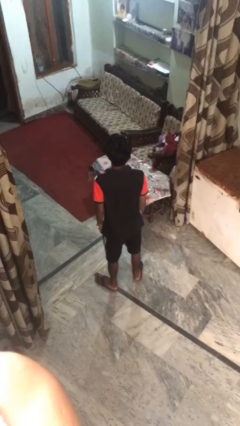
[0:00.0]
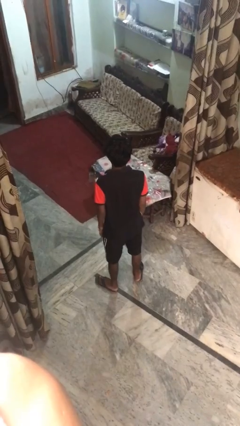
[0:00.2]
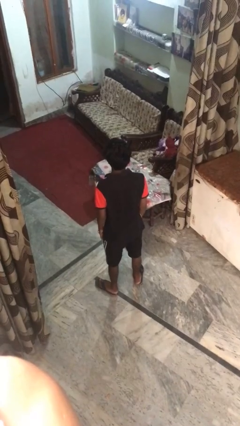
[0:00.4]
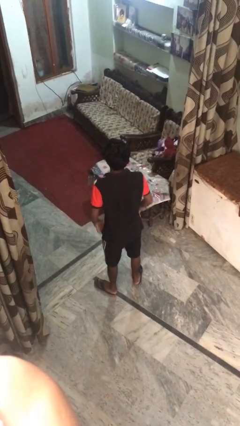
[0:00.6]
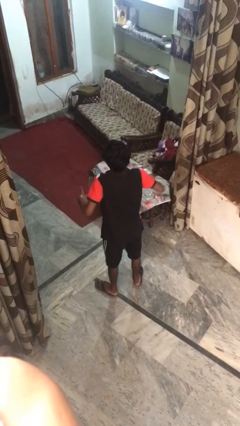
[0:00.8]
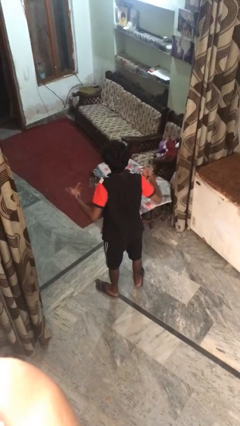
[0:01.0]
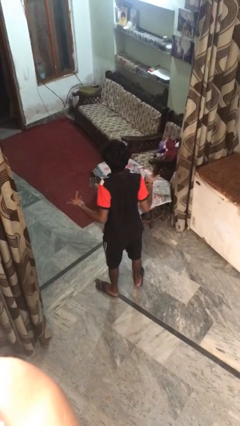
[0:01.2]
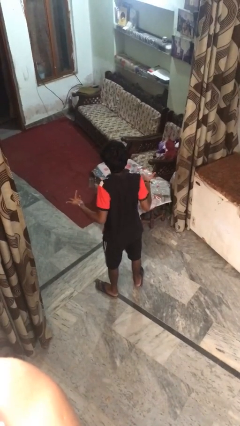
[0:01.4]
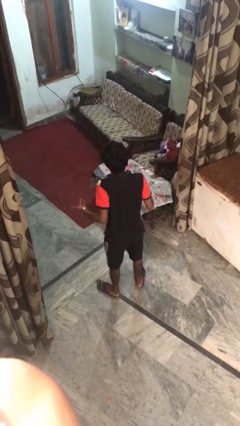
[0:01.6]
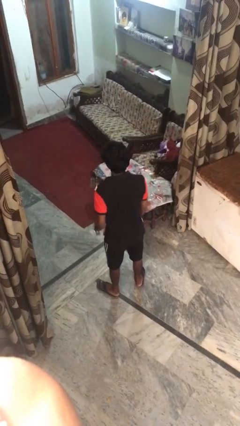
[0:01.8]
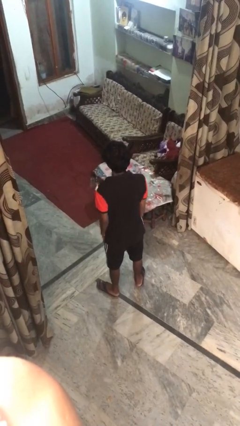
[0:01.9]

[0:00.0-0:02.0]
person shrugs

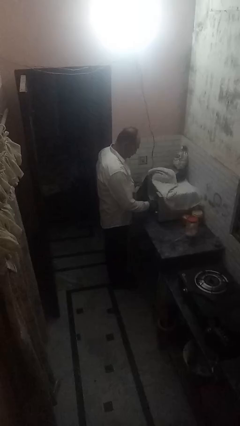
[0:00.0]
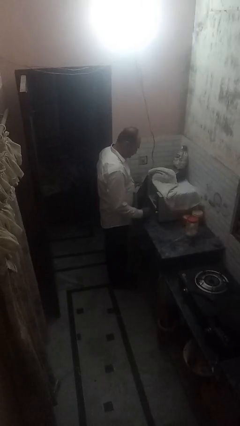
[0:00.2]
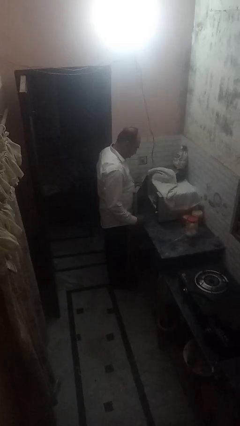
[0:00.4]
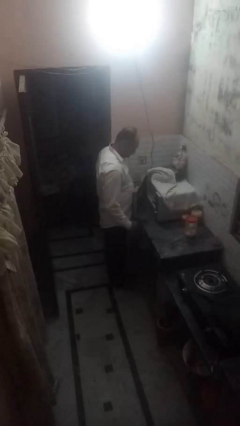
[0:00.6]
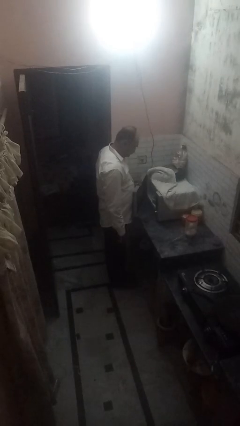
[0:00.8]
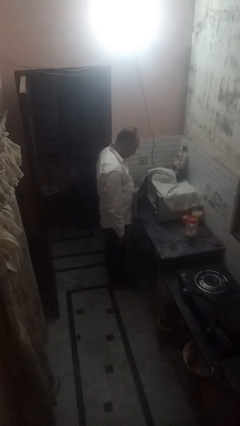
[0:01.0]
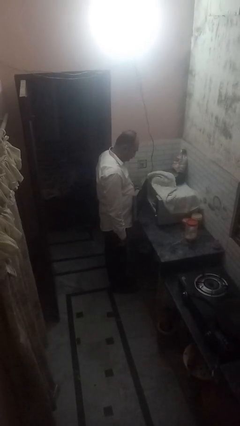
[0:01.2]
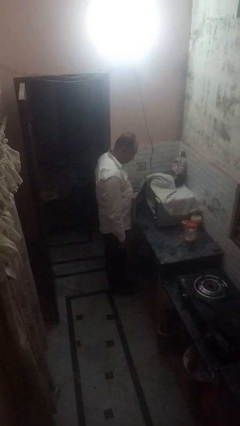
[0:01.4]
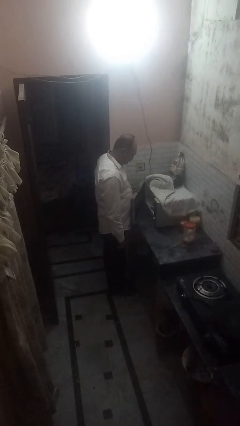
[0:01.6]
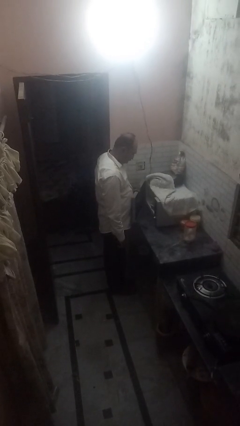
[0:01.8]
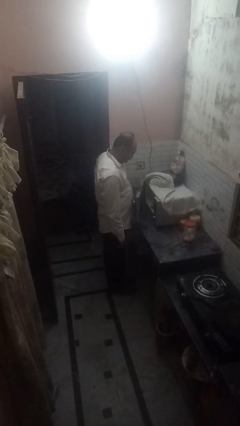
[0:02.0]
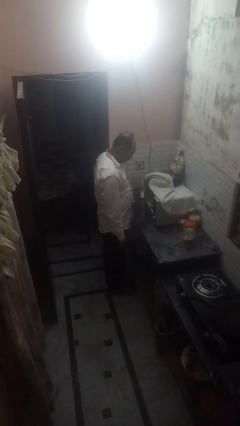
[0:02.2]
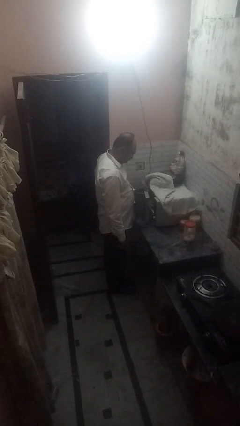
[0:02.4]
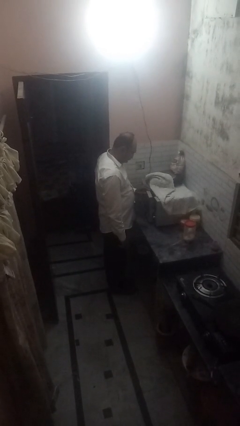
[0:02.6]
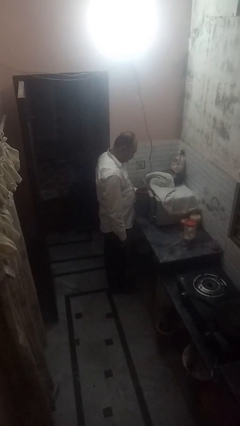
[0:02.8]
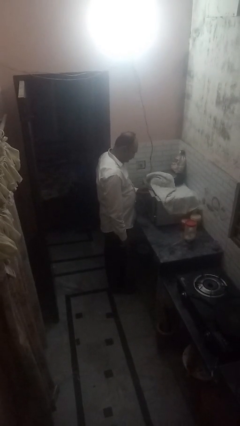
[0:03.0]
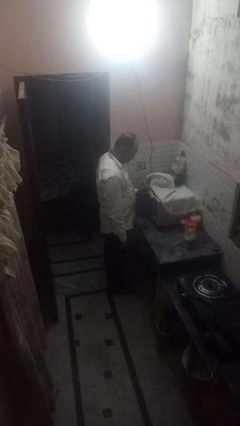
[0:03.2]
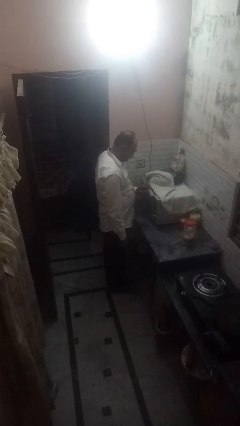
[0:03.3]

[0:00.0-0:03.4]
person puts object into microwave

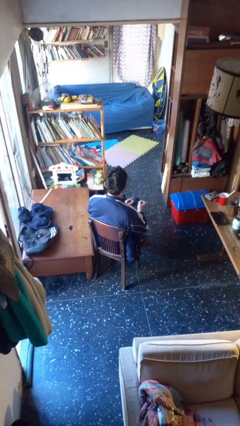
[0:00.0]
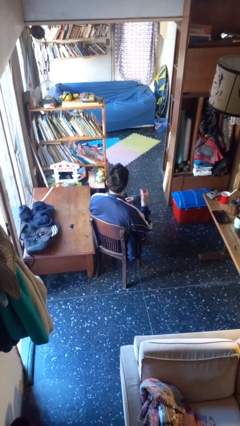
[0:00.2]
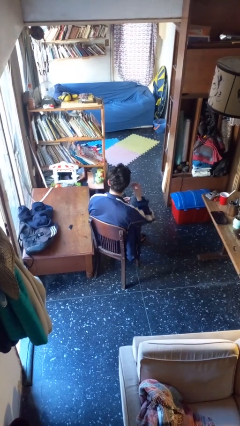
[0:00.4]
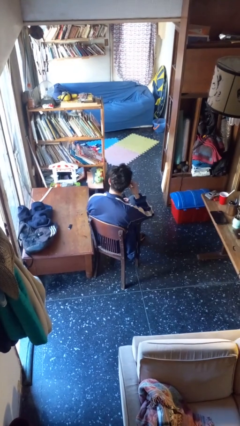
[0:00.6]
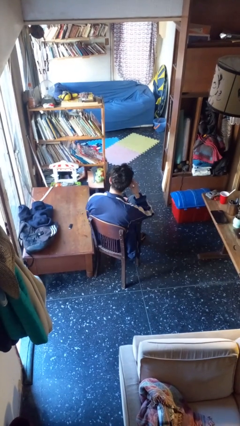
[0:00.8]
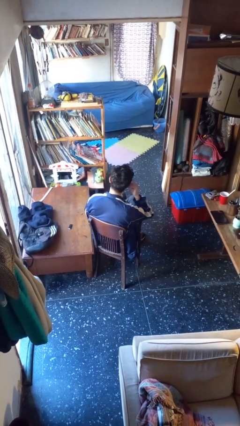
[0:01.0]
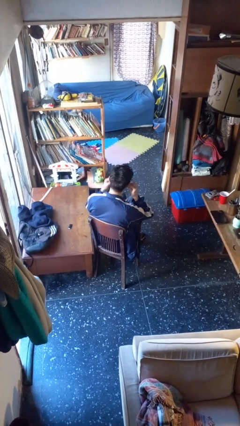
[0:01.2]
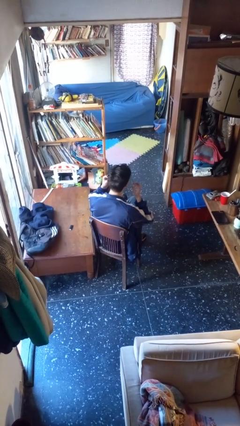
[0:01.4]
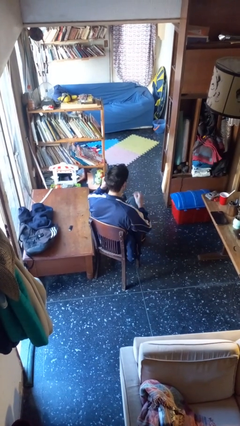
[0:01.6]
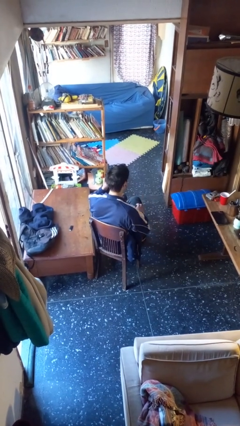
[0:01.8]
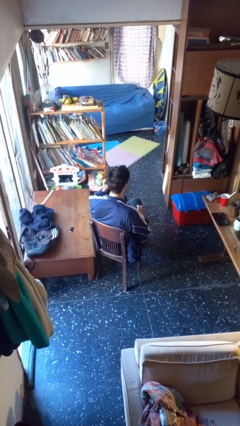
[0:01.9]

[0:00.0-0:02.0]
person puts on headphones

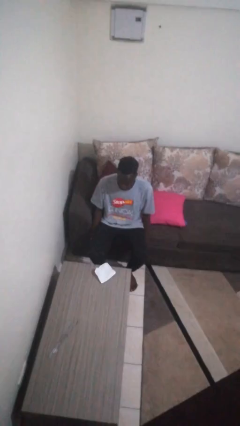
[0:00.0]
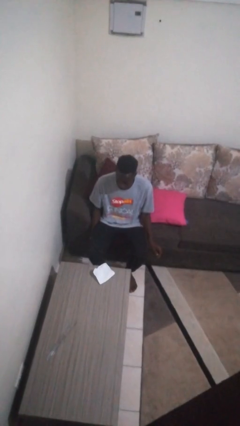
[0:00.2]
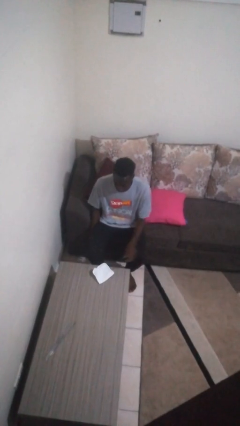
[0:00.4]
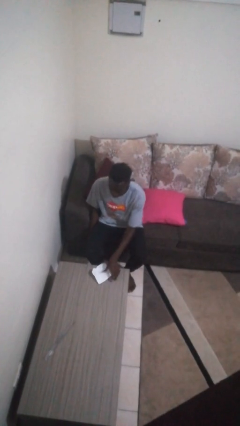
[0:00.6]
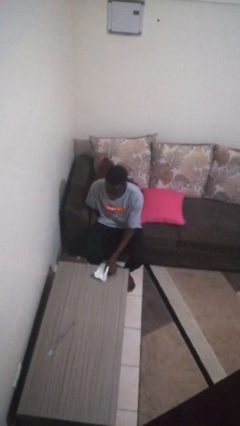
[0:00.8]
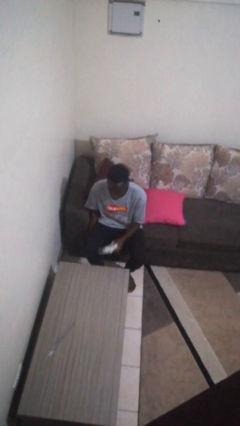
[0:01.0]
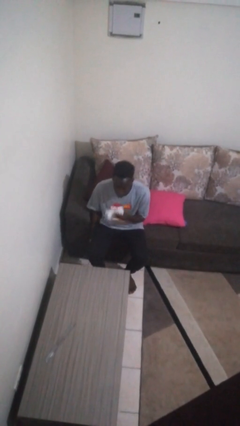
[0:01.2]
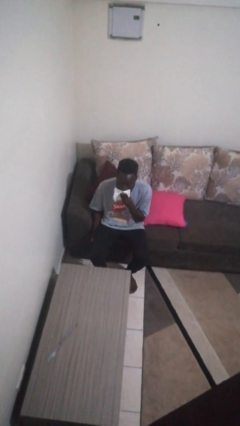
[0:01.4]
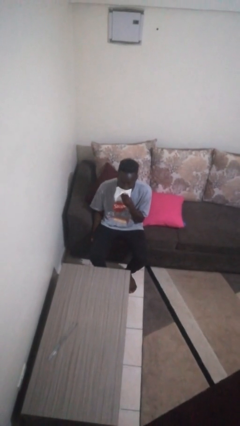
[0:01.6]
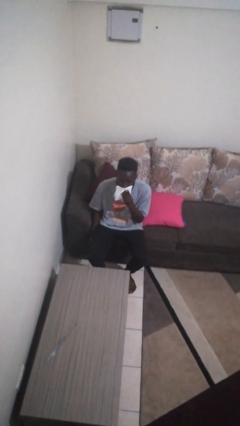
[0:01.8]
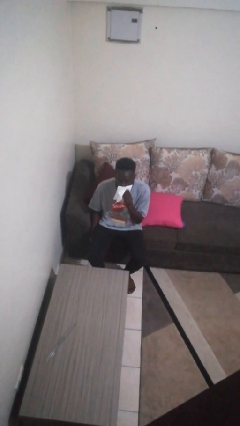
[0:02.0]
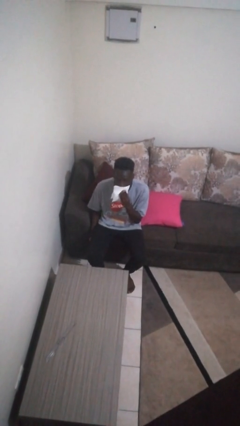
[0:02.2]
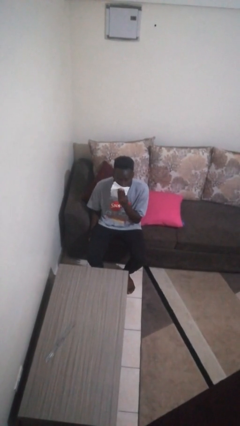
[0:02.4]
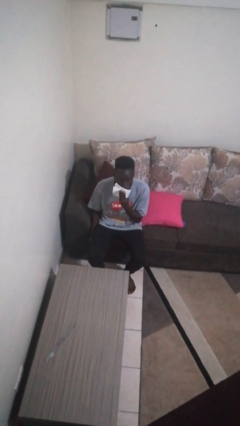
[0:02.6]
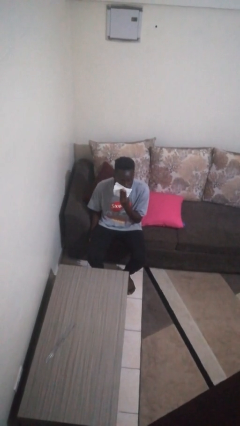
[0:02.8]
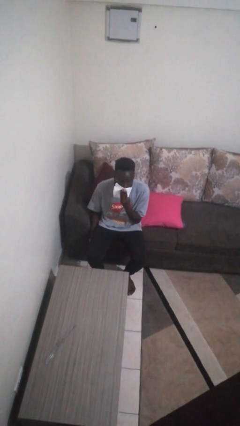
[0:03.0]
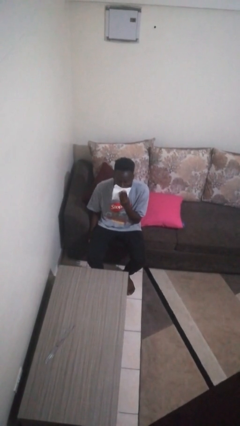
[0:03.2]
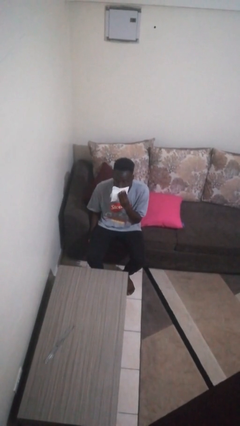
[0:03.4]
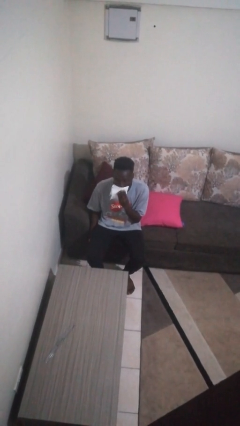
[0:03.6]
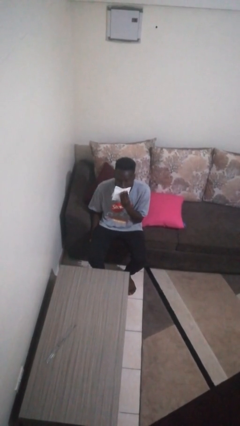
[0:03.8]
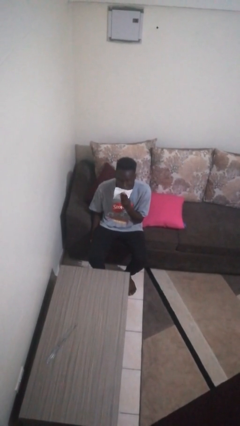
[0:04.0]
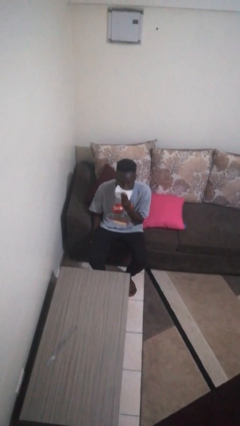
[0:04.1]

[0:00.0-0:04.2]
person wipes mouth with napkin

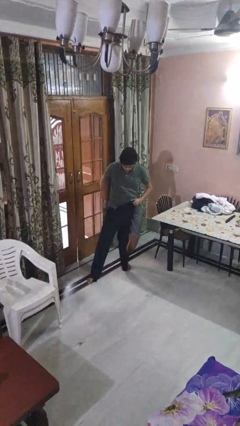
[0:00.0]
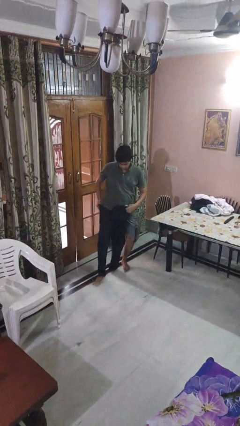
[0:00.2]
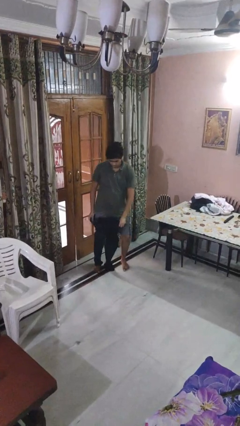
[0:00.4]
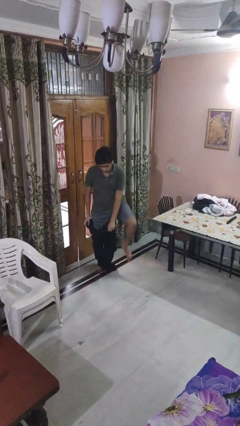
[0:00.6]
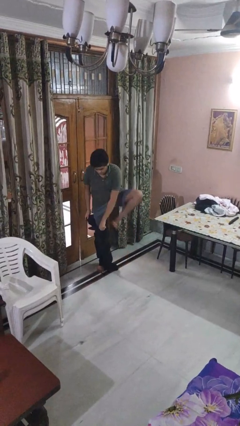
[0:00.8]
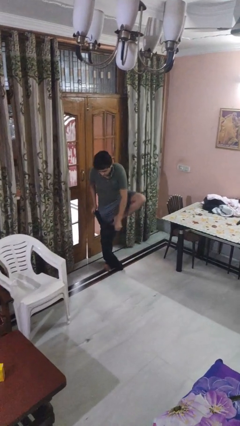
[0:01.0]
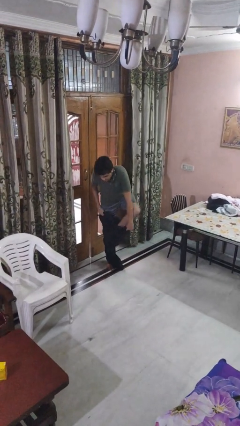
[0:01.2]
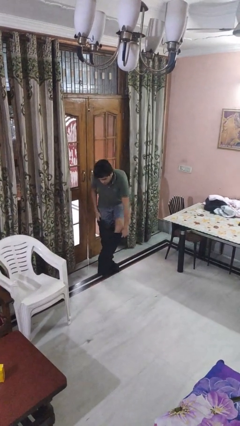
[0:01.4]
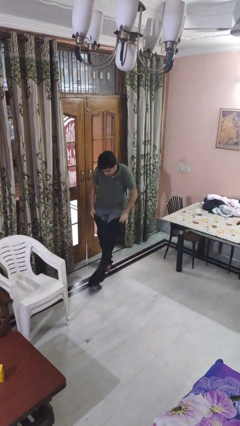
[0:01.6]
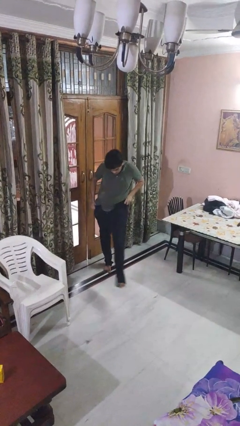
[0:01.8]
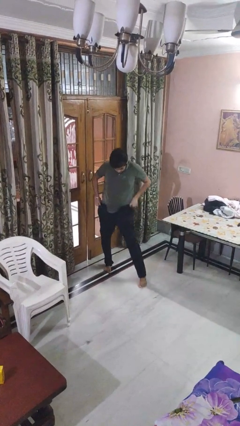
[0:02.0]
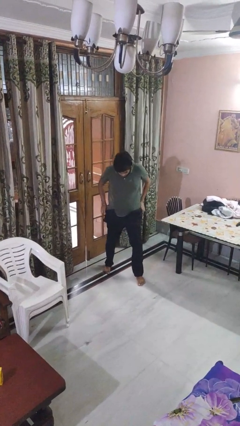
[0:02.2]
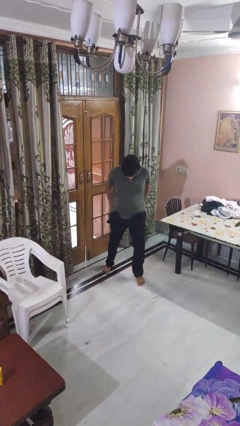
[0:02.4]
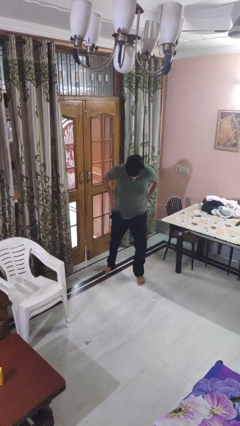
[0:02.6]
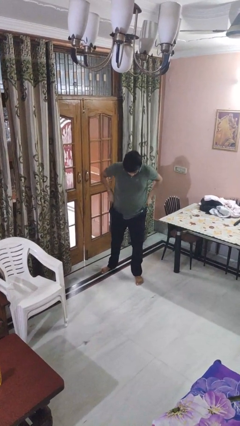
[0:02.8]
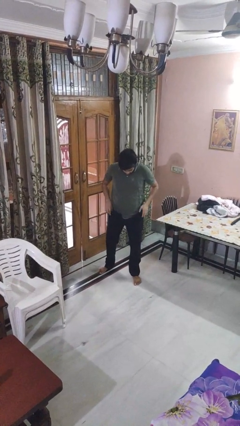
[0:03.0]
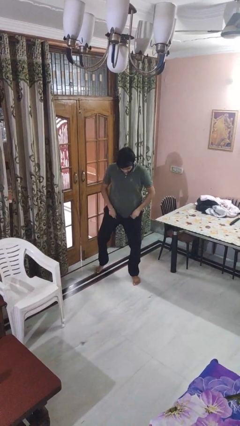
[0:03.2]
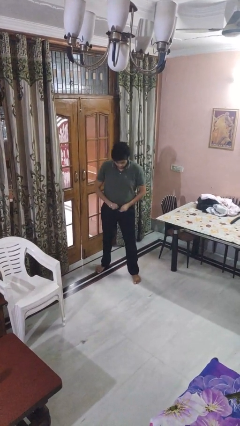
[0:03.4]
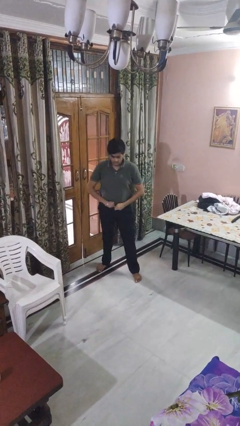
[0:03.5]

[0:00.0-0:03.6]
person puts on pants

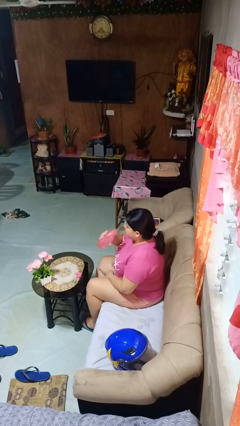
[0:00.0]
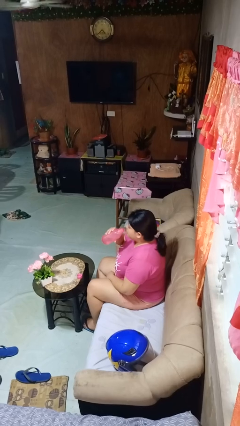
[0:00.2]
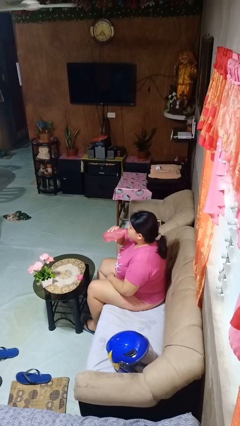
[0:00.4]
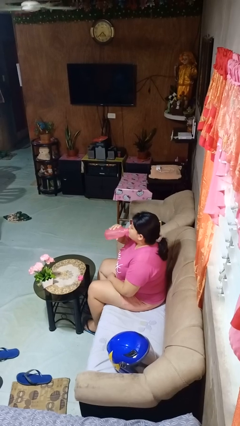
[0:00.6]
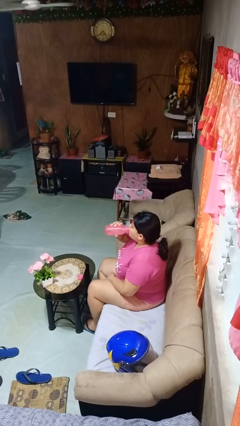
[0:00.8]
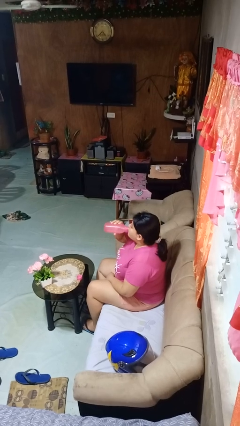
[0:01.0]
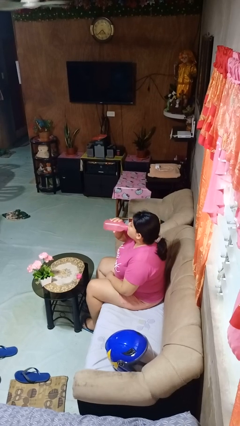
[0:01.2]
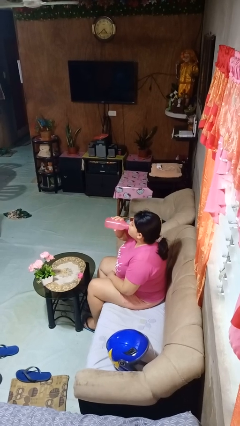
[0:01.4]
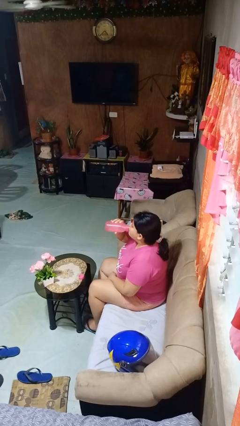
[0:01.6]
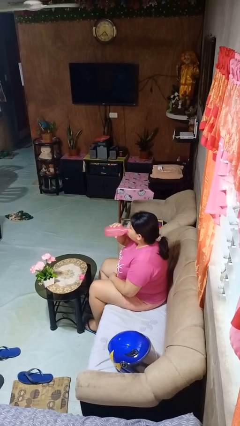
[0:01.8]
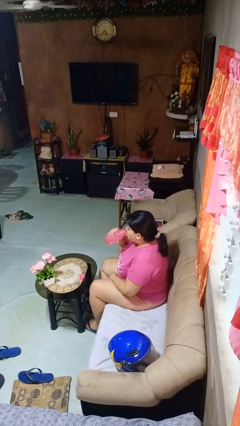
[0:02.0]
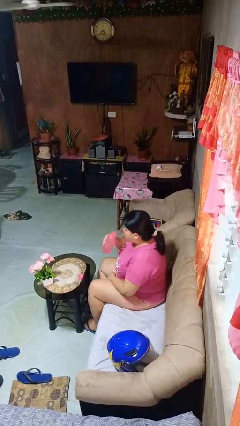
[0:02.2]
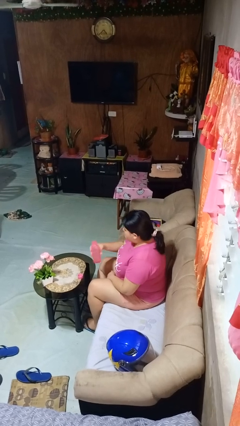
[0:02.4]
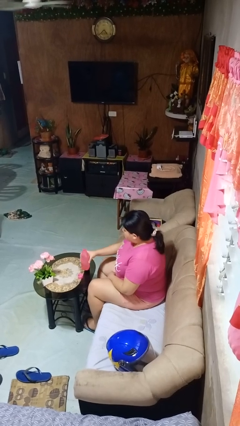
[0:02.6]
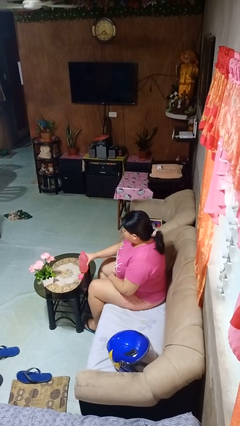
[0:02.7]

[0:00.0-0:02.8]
person drinks from bottle
